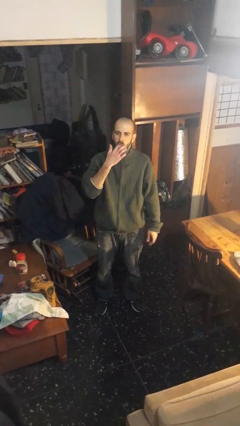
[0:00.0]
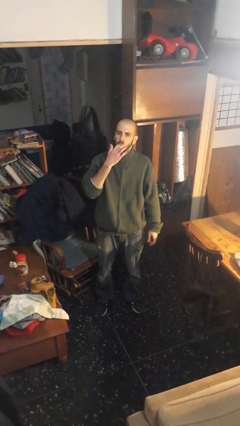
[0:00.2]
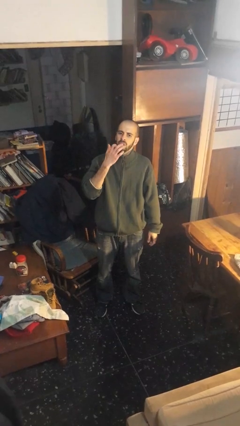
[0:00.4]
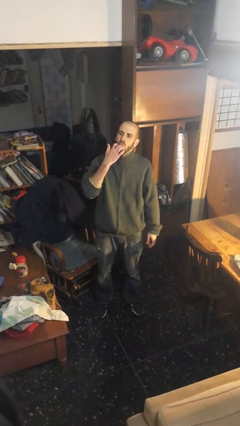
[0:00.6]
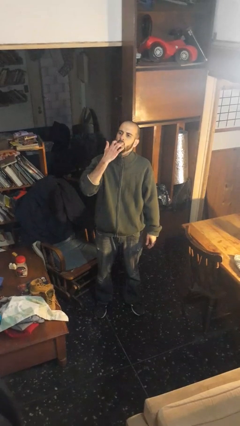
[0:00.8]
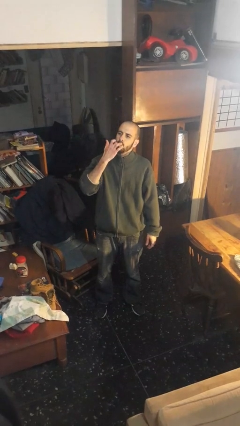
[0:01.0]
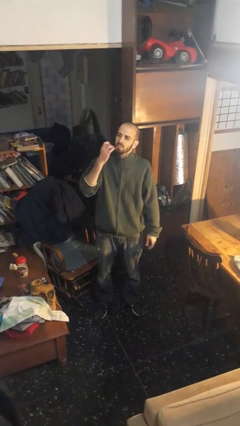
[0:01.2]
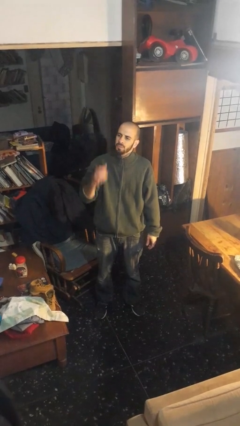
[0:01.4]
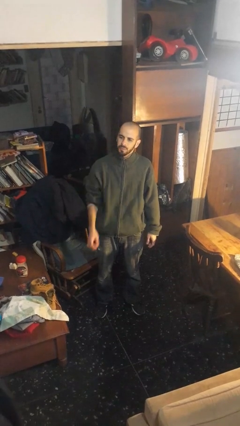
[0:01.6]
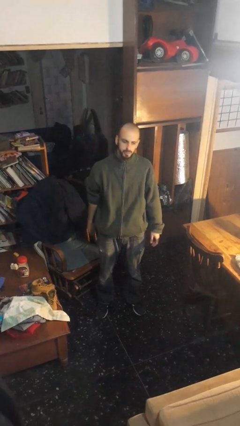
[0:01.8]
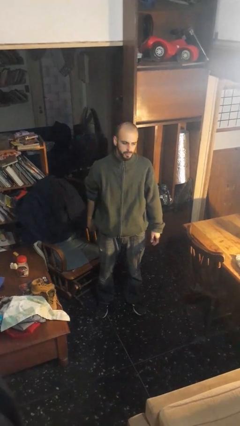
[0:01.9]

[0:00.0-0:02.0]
person licks fingers

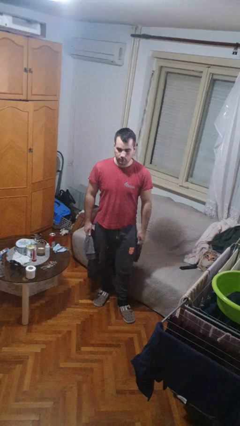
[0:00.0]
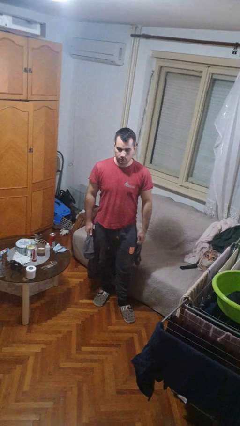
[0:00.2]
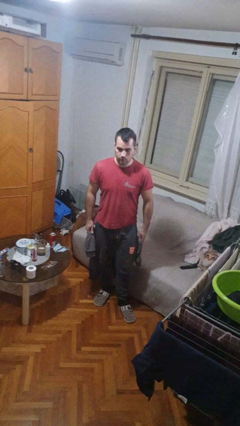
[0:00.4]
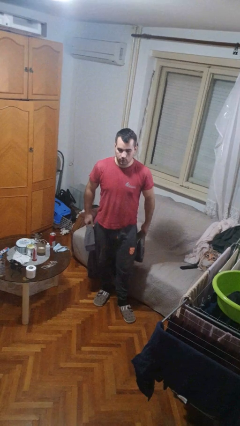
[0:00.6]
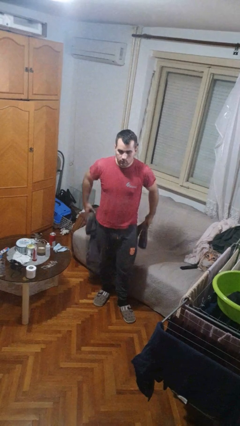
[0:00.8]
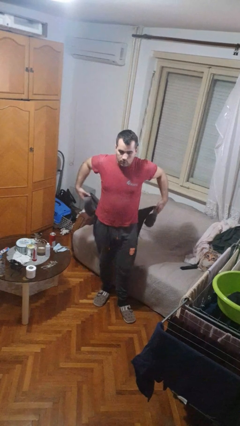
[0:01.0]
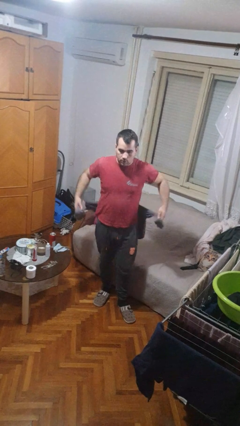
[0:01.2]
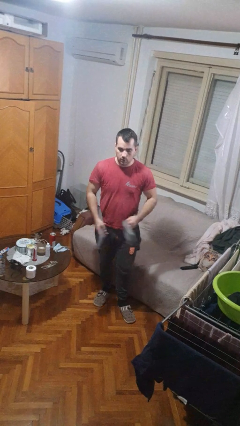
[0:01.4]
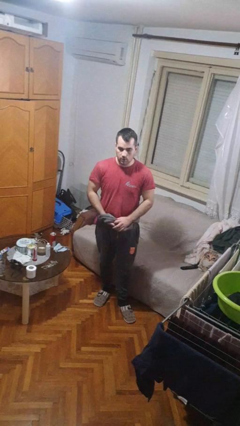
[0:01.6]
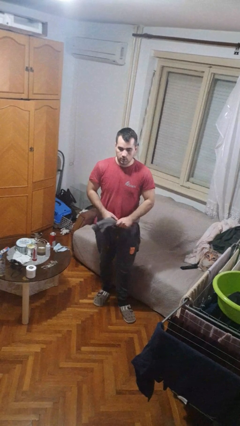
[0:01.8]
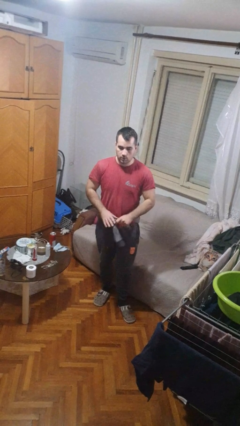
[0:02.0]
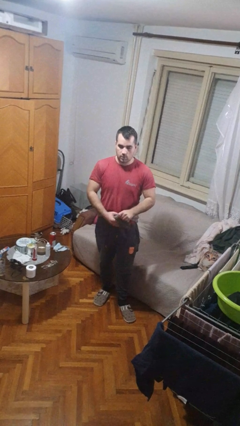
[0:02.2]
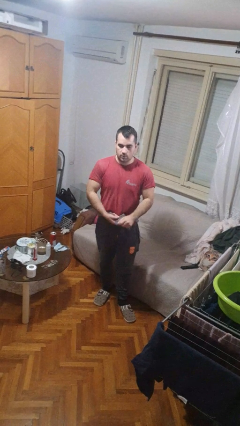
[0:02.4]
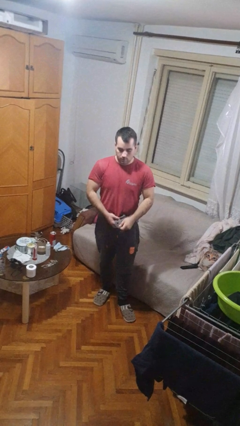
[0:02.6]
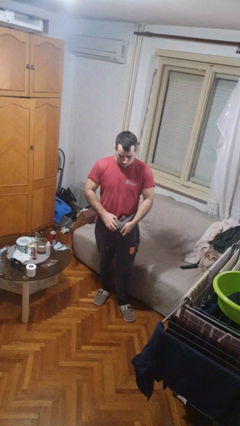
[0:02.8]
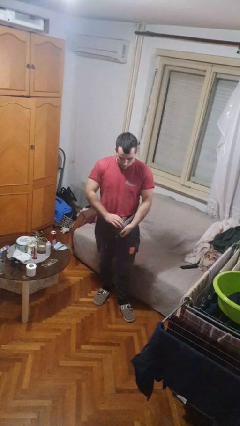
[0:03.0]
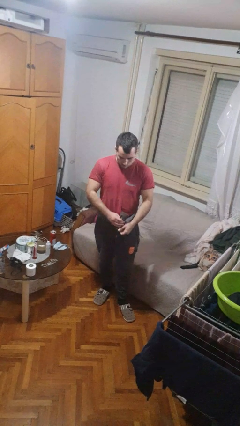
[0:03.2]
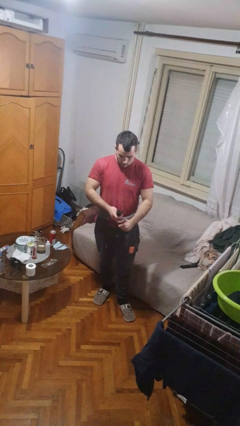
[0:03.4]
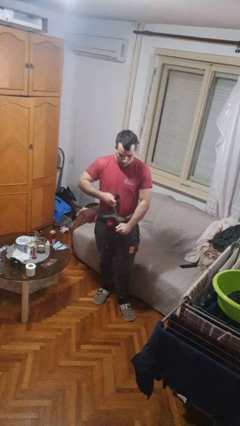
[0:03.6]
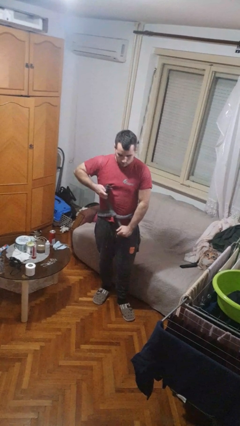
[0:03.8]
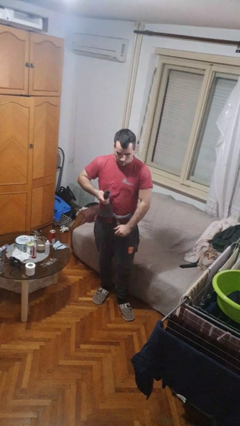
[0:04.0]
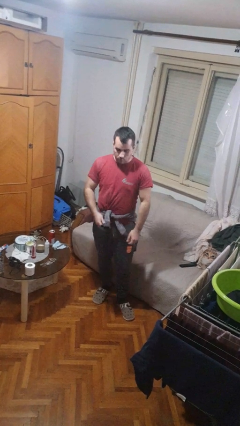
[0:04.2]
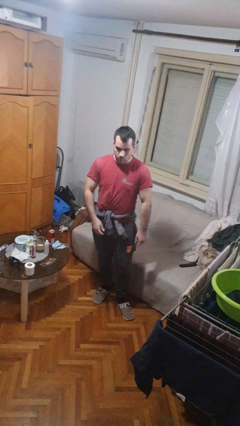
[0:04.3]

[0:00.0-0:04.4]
person ties jacket around waist

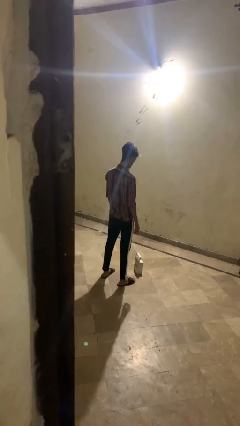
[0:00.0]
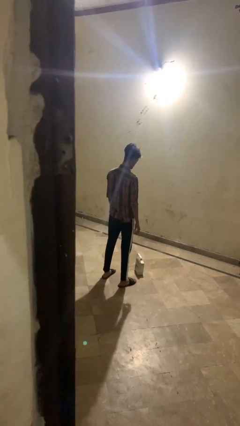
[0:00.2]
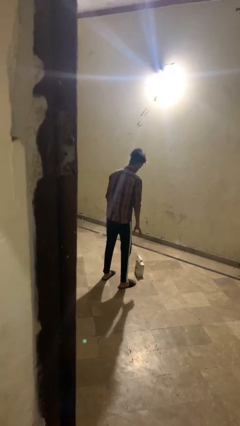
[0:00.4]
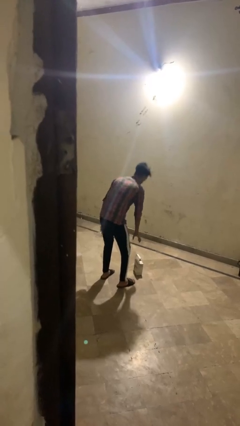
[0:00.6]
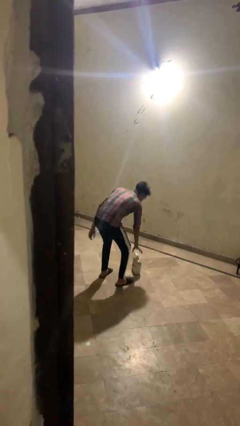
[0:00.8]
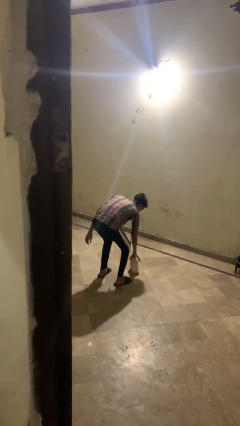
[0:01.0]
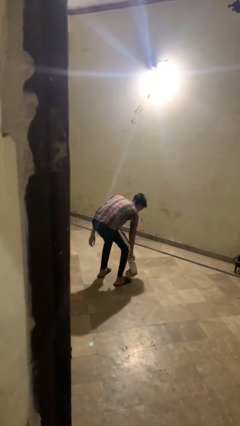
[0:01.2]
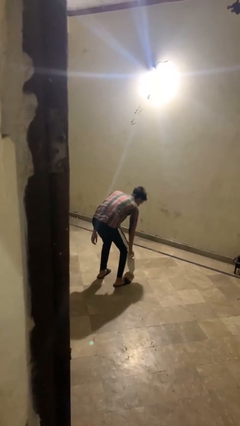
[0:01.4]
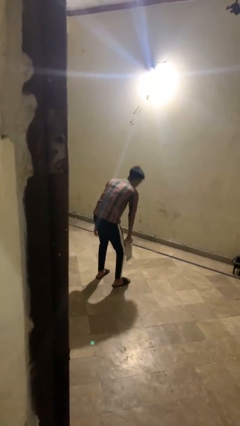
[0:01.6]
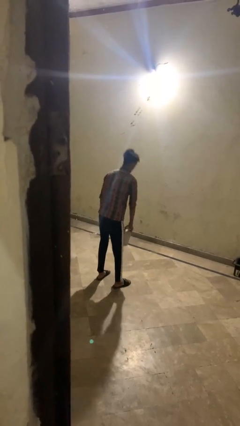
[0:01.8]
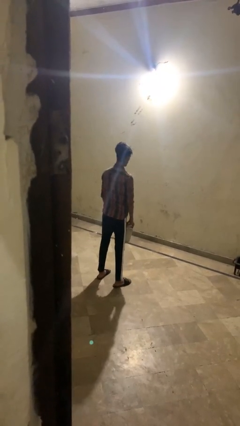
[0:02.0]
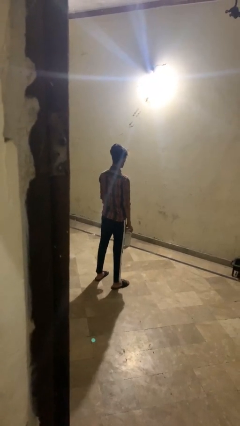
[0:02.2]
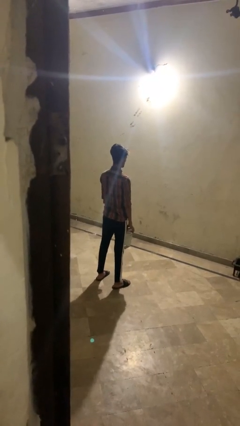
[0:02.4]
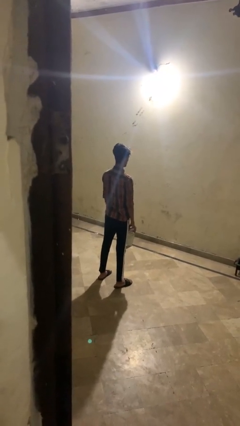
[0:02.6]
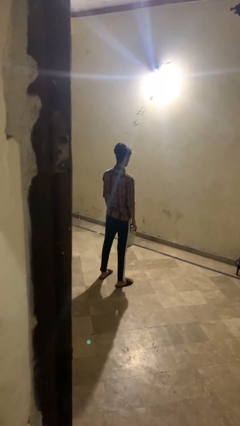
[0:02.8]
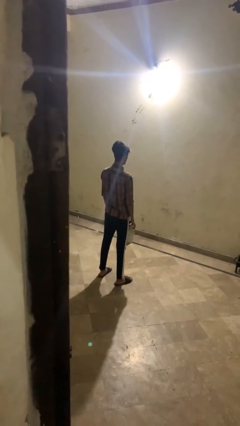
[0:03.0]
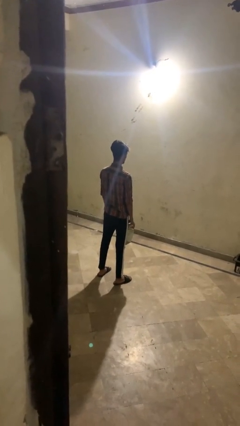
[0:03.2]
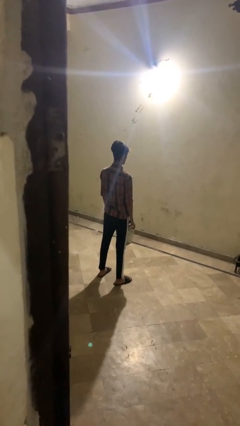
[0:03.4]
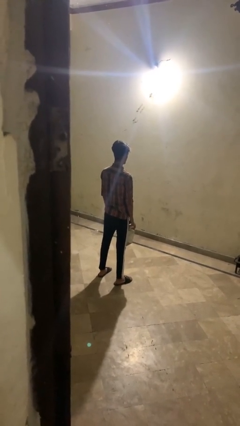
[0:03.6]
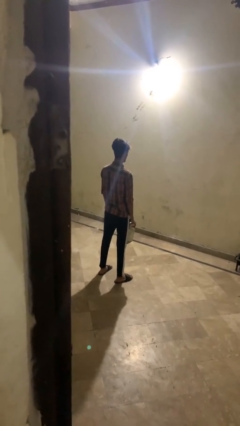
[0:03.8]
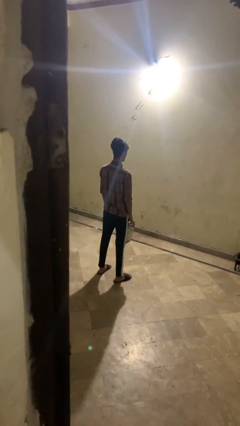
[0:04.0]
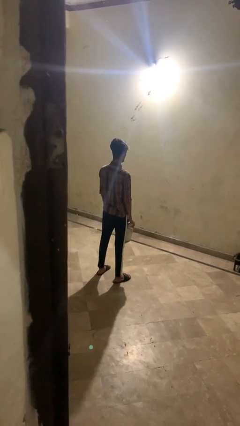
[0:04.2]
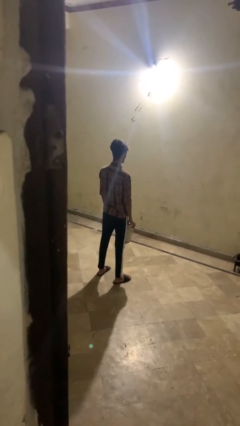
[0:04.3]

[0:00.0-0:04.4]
person picks up object from floor

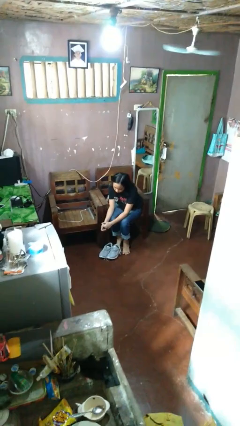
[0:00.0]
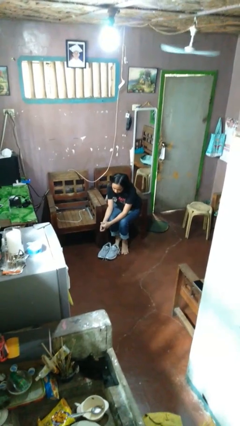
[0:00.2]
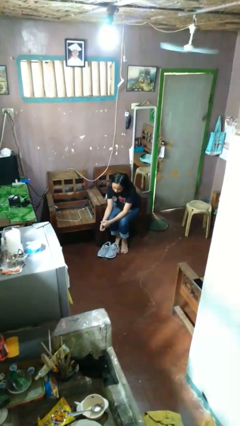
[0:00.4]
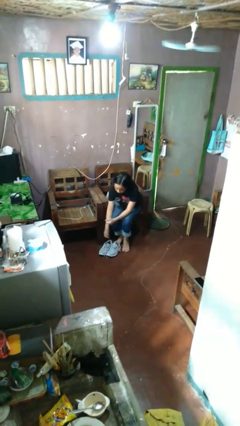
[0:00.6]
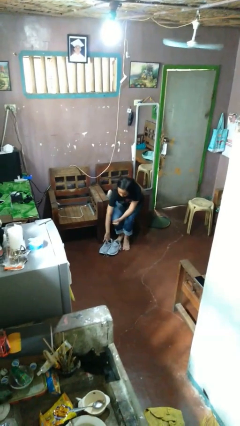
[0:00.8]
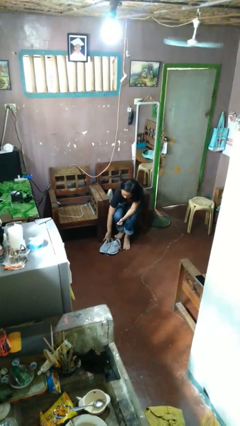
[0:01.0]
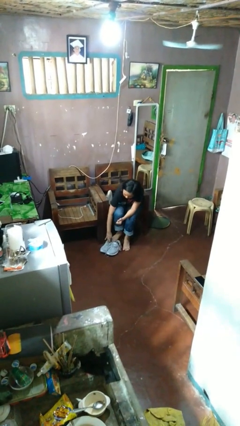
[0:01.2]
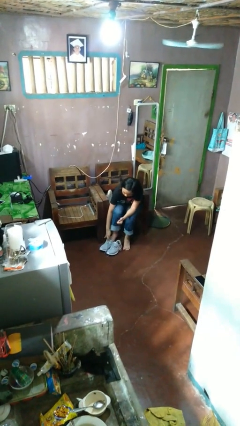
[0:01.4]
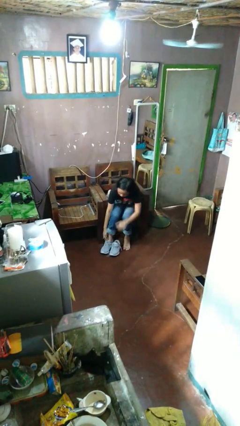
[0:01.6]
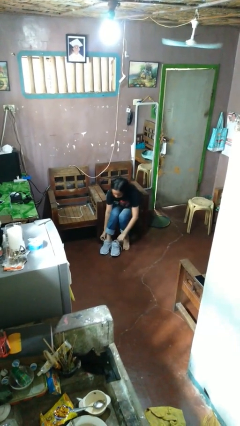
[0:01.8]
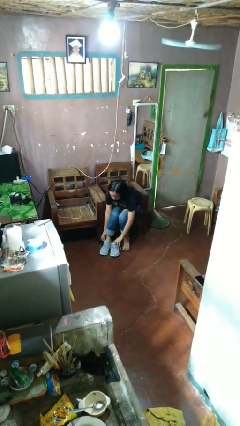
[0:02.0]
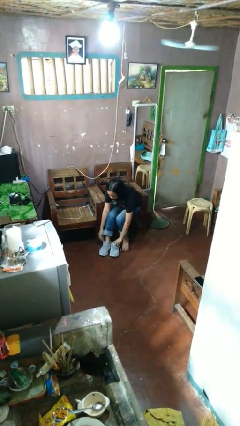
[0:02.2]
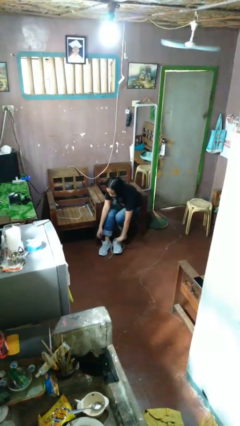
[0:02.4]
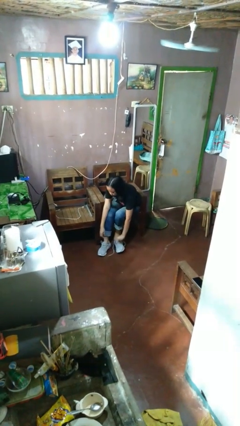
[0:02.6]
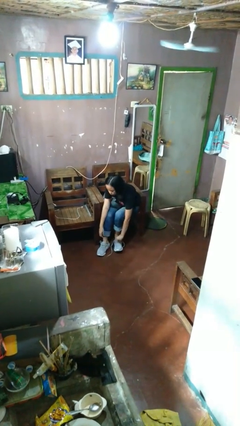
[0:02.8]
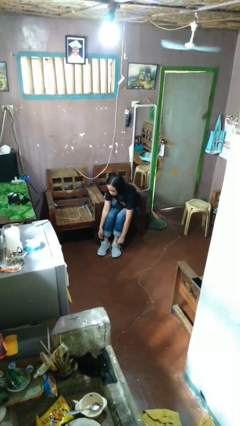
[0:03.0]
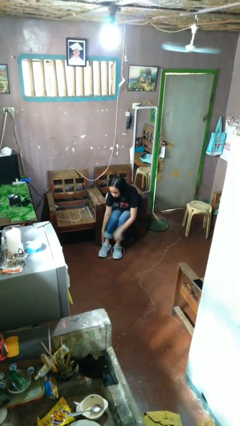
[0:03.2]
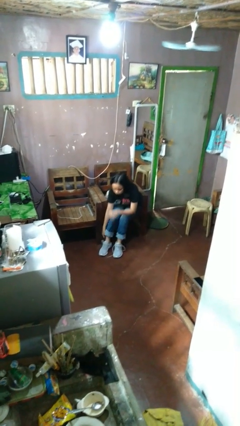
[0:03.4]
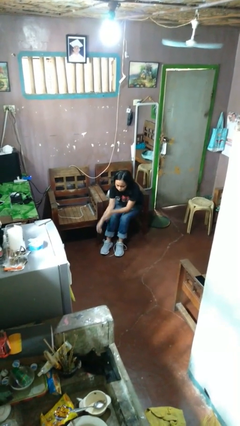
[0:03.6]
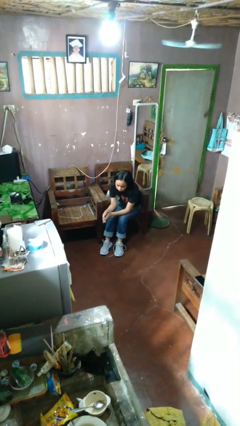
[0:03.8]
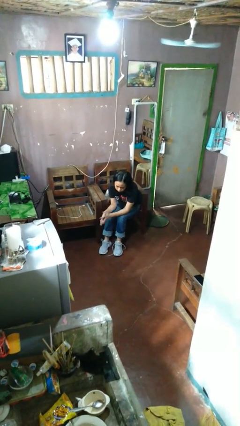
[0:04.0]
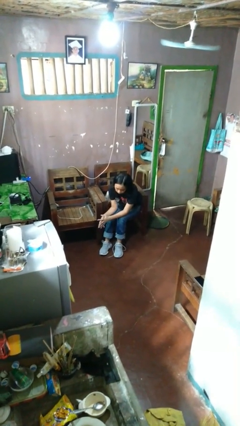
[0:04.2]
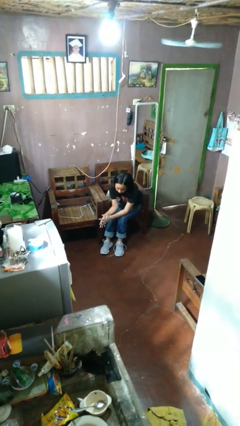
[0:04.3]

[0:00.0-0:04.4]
person puts on shoes

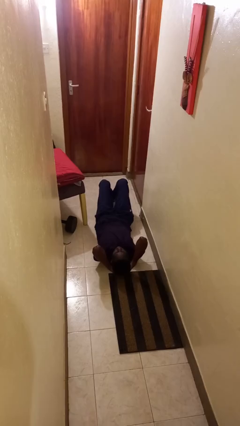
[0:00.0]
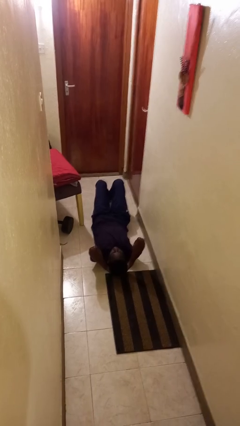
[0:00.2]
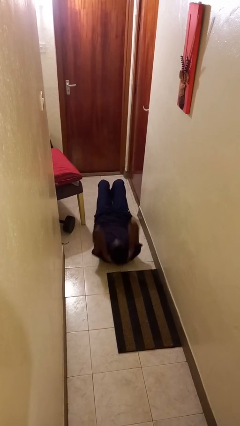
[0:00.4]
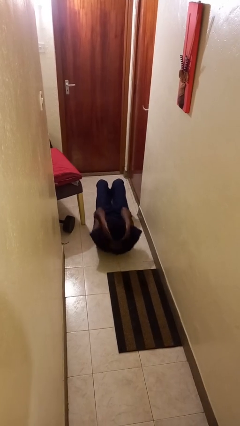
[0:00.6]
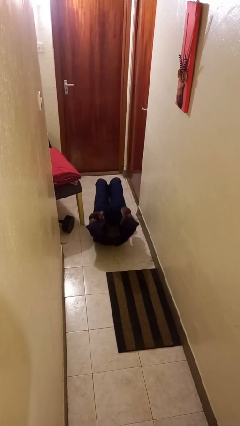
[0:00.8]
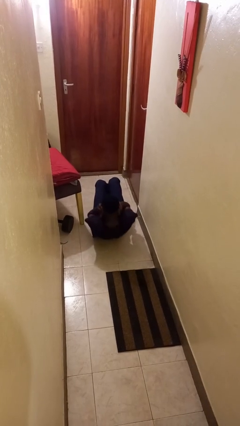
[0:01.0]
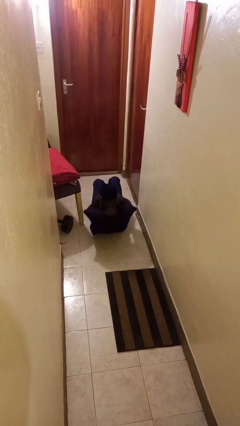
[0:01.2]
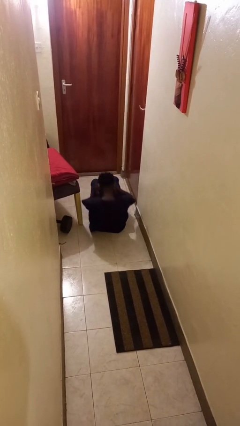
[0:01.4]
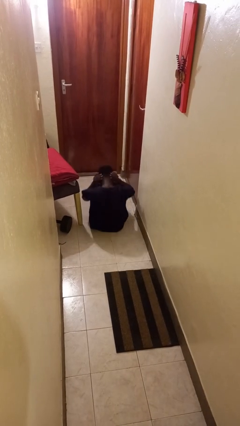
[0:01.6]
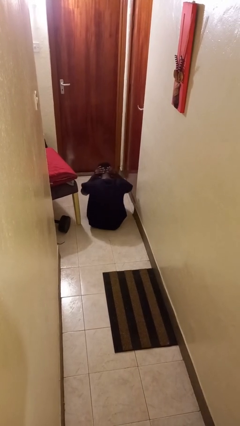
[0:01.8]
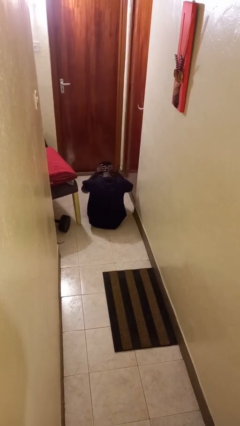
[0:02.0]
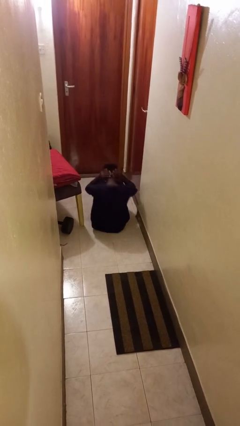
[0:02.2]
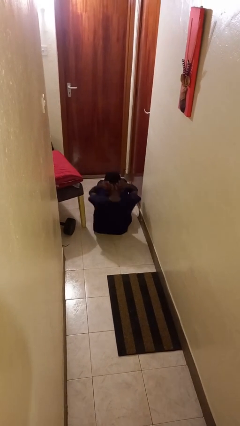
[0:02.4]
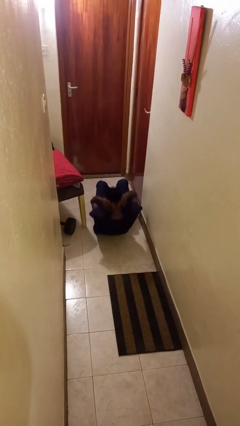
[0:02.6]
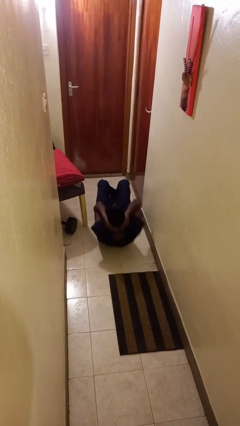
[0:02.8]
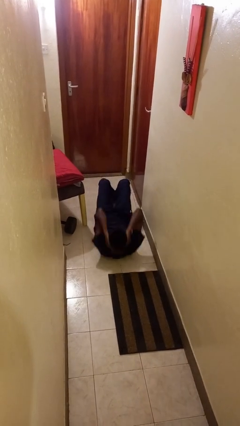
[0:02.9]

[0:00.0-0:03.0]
person exercises with situp
